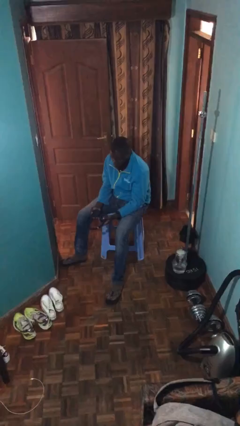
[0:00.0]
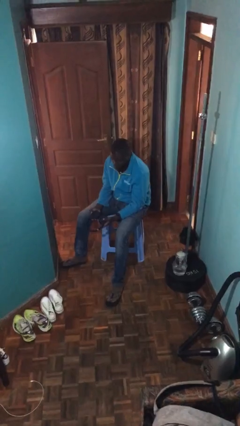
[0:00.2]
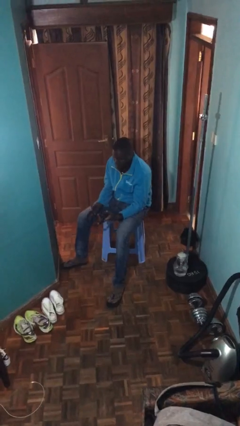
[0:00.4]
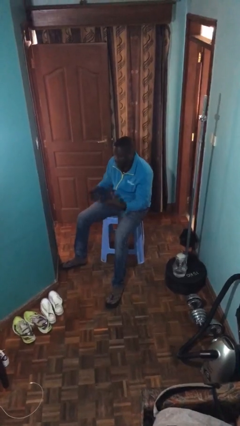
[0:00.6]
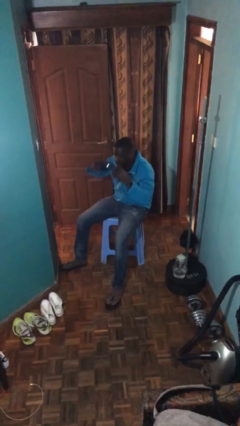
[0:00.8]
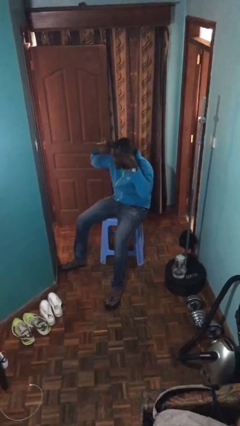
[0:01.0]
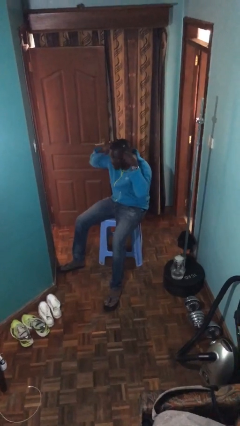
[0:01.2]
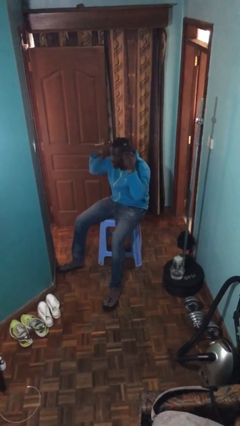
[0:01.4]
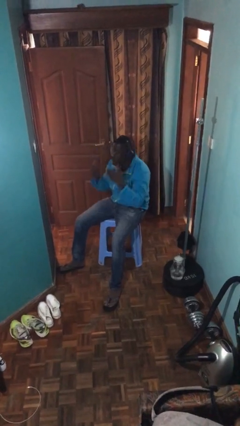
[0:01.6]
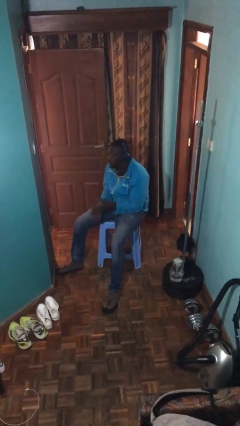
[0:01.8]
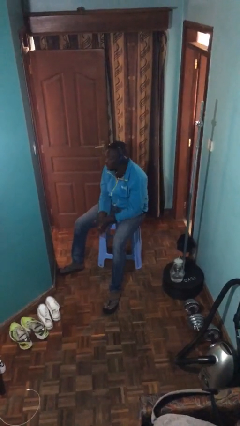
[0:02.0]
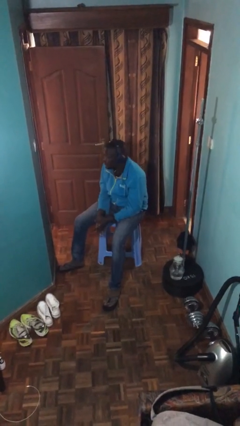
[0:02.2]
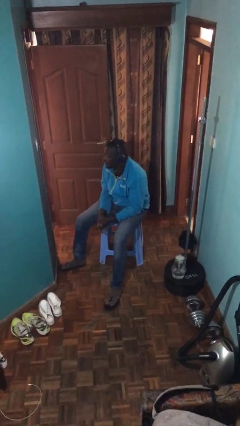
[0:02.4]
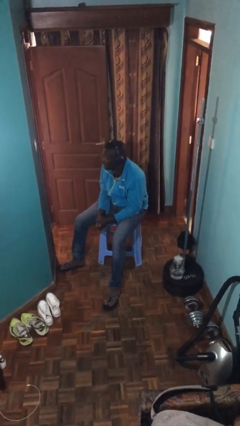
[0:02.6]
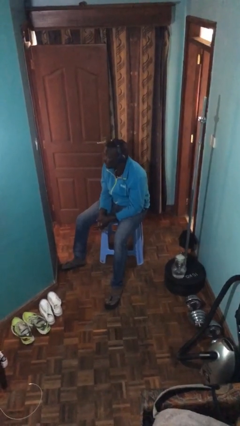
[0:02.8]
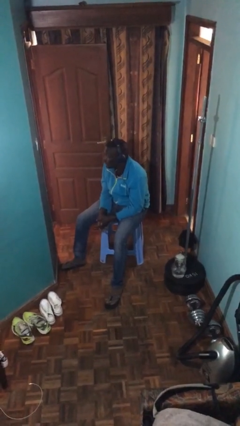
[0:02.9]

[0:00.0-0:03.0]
person puts on headphones

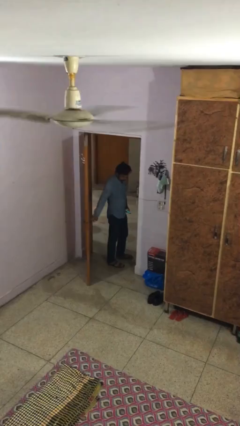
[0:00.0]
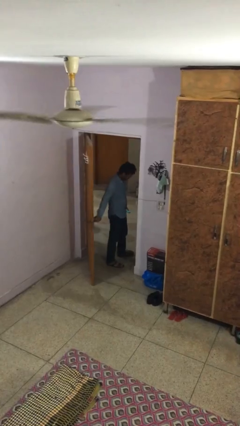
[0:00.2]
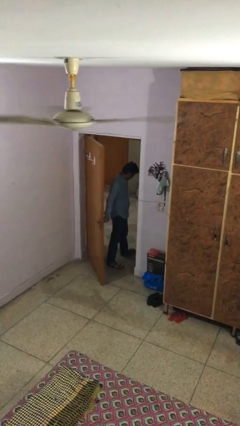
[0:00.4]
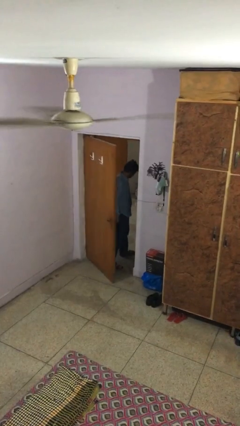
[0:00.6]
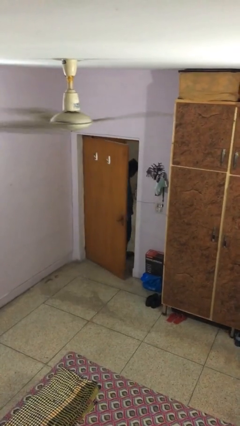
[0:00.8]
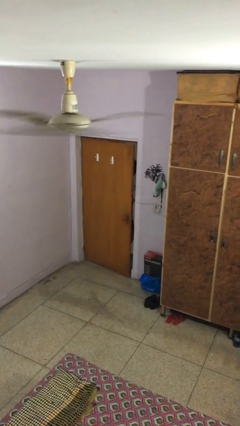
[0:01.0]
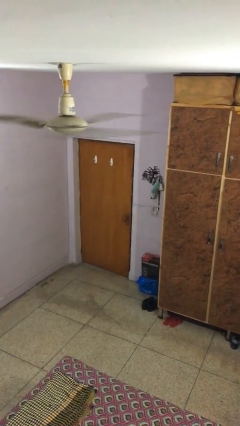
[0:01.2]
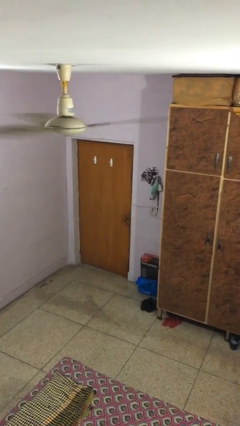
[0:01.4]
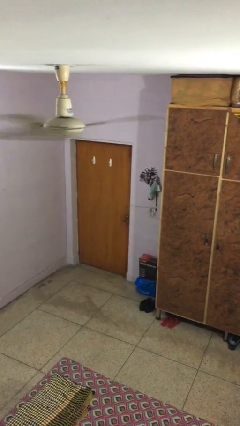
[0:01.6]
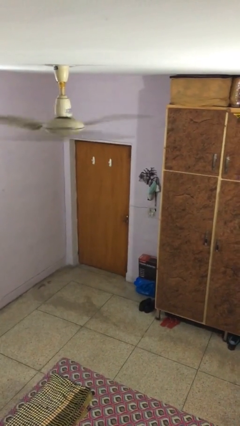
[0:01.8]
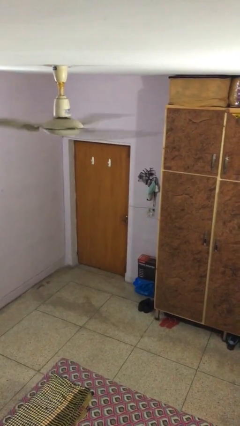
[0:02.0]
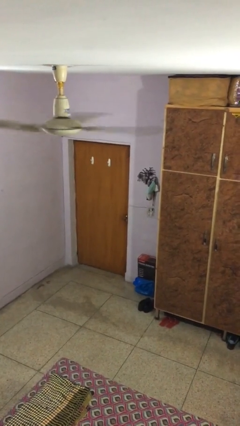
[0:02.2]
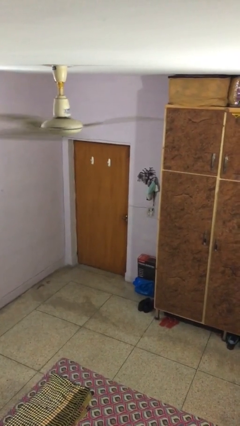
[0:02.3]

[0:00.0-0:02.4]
person closes facility door

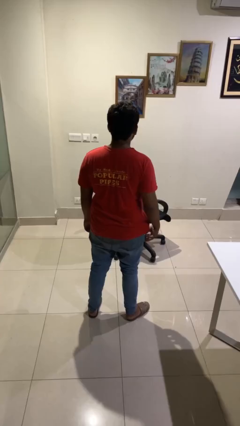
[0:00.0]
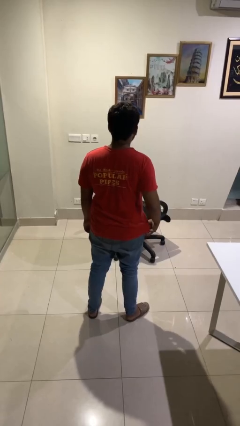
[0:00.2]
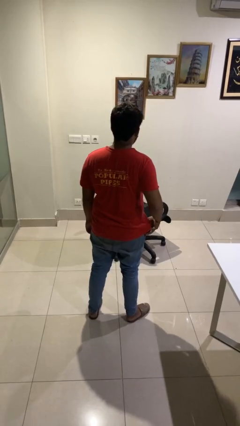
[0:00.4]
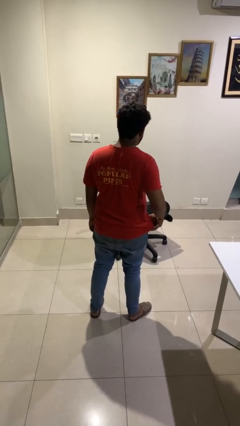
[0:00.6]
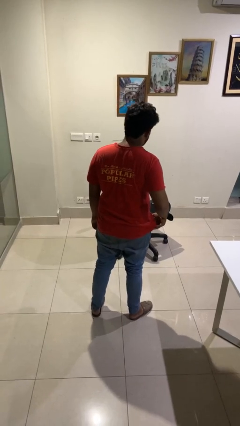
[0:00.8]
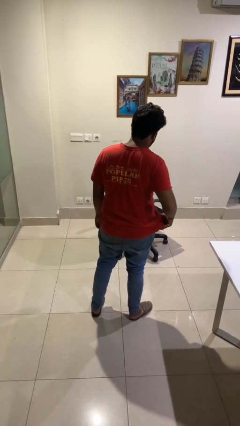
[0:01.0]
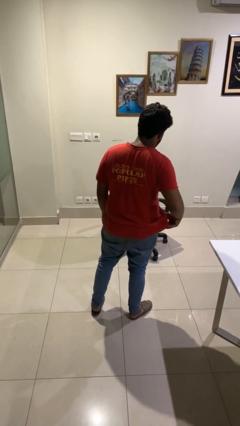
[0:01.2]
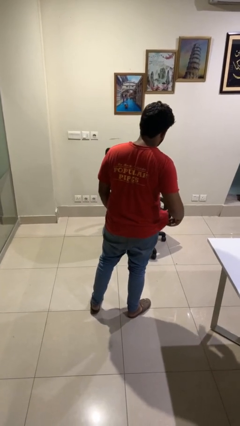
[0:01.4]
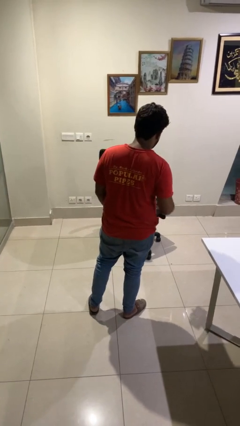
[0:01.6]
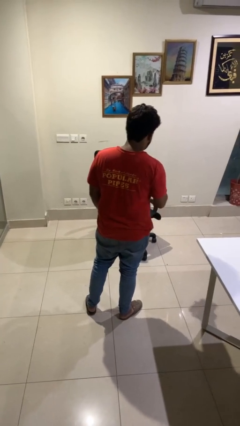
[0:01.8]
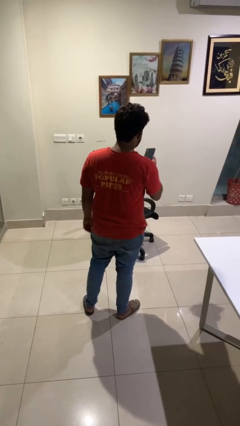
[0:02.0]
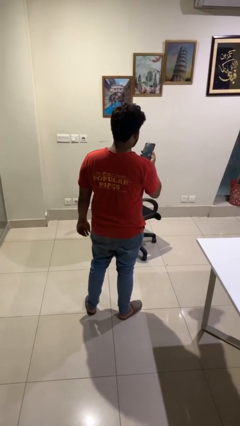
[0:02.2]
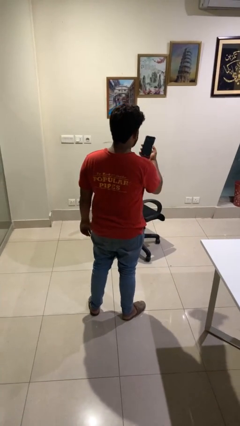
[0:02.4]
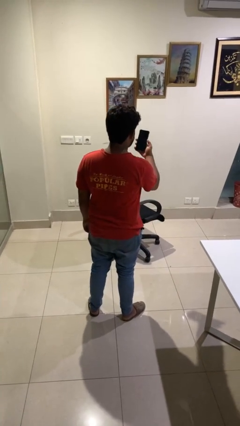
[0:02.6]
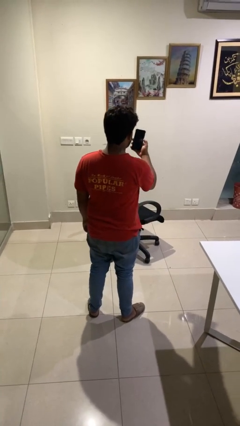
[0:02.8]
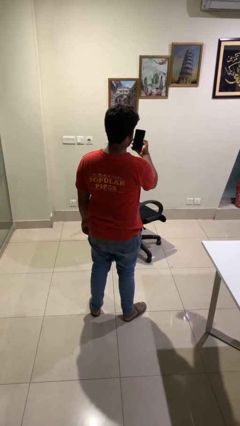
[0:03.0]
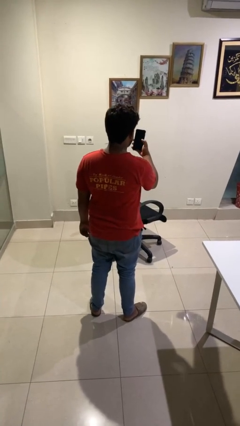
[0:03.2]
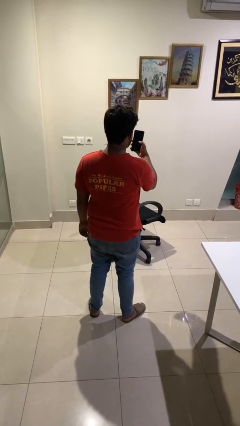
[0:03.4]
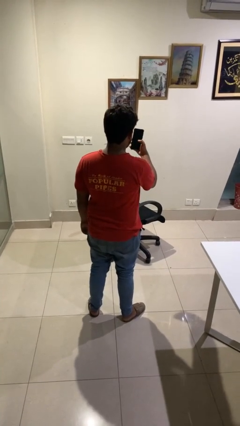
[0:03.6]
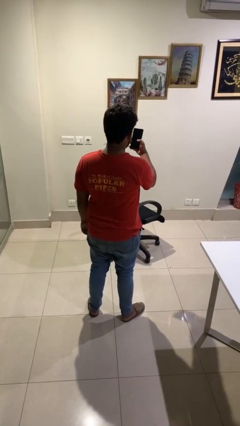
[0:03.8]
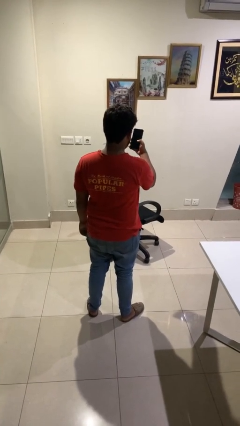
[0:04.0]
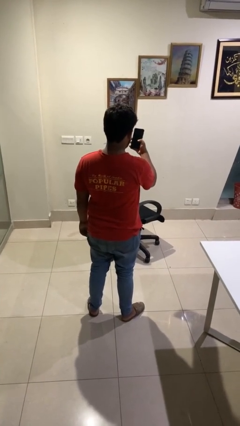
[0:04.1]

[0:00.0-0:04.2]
person takes phone from pocket

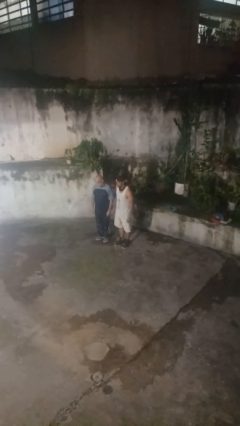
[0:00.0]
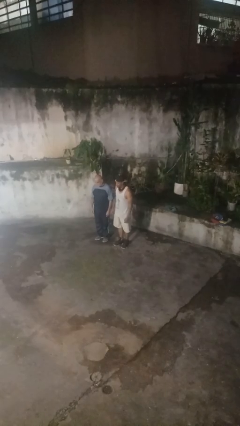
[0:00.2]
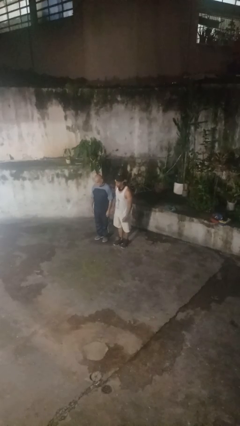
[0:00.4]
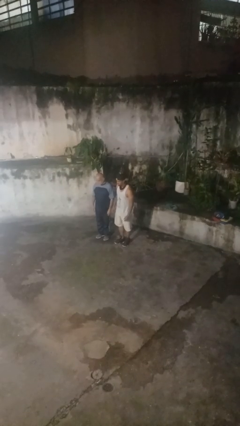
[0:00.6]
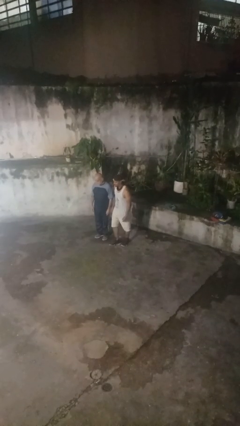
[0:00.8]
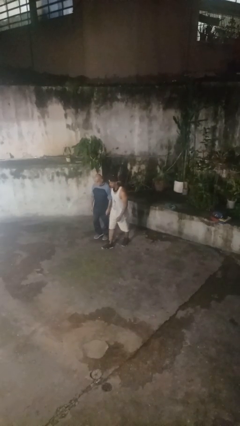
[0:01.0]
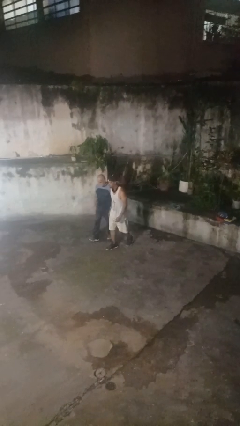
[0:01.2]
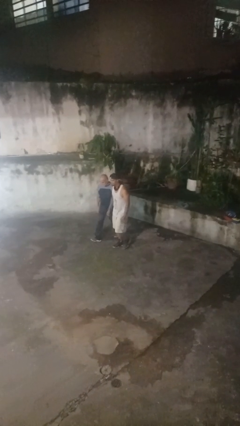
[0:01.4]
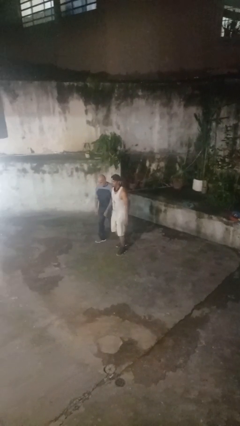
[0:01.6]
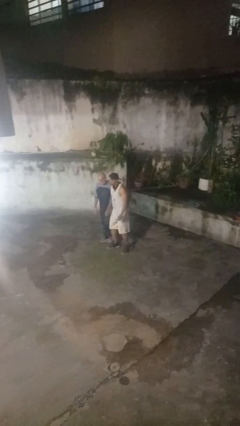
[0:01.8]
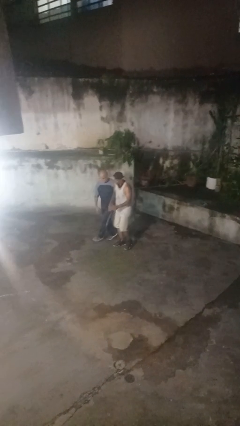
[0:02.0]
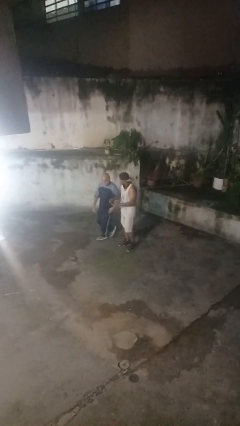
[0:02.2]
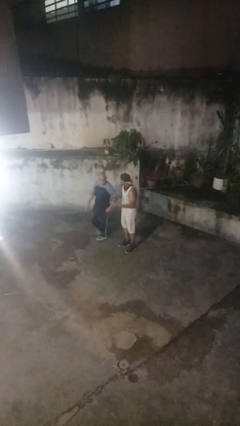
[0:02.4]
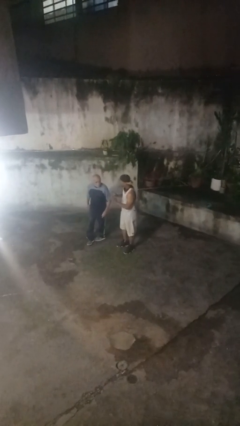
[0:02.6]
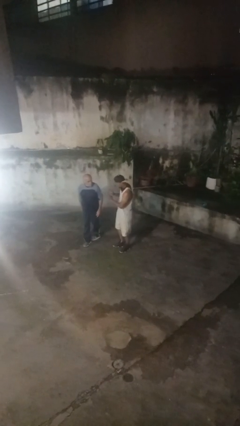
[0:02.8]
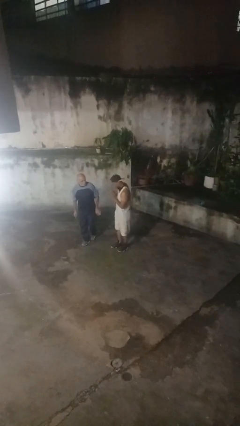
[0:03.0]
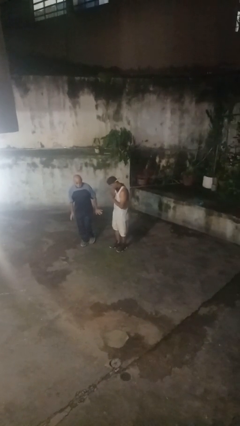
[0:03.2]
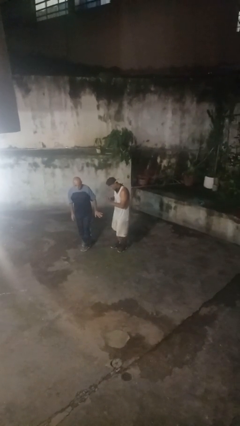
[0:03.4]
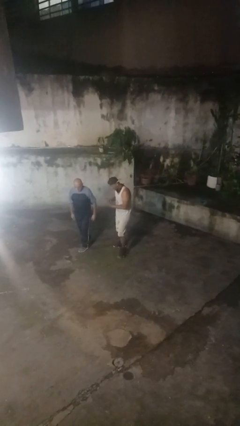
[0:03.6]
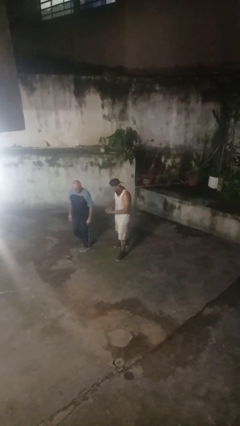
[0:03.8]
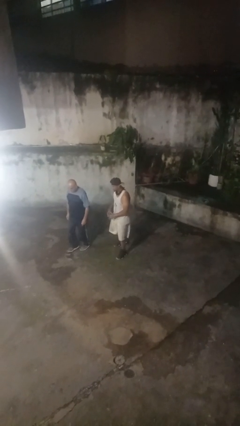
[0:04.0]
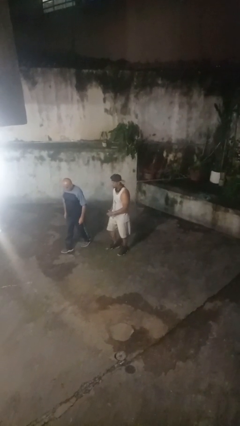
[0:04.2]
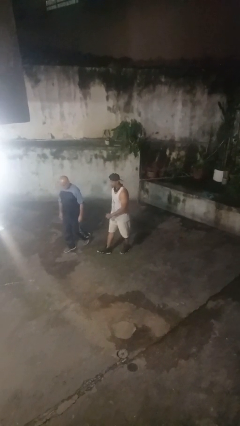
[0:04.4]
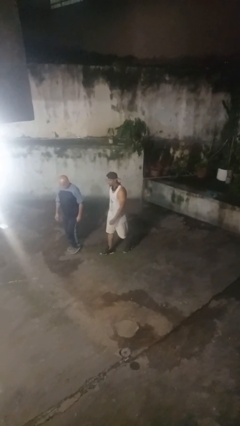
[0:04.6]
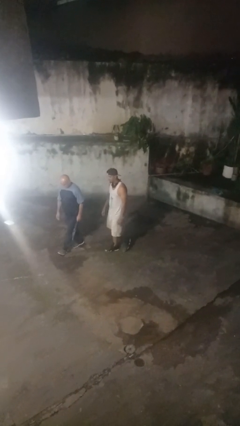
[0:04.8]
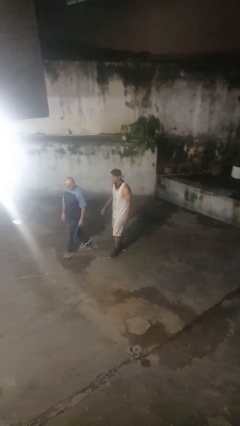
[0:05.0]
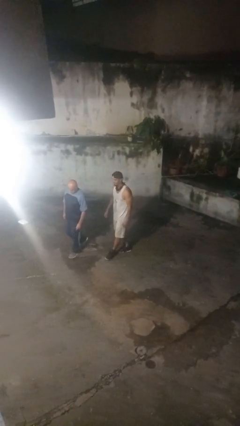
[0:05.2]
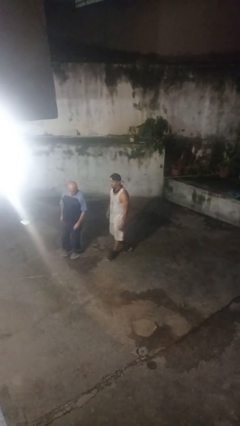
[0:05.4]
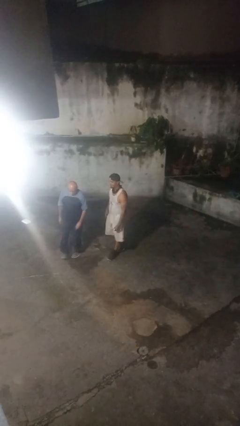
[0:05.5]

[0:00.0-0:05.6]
person bumps into person

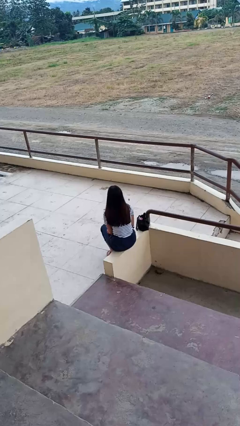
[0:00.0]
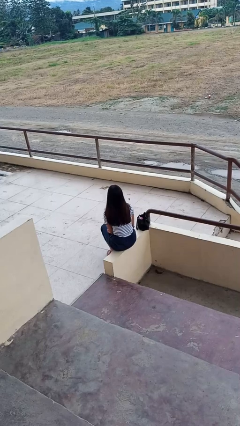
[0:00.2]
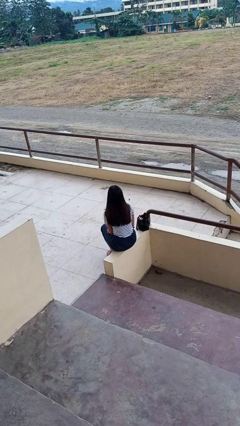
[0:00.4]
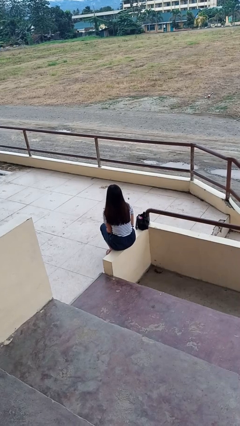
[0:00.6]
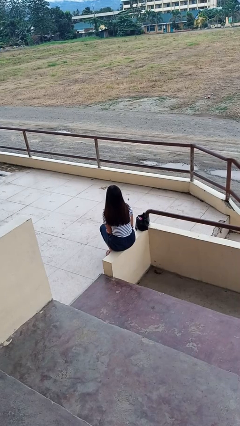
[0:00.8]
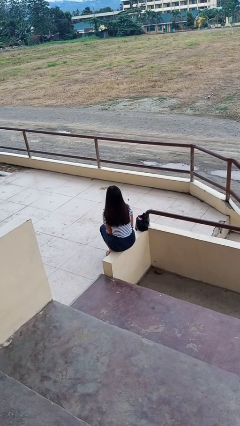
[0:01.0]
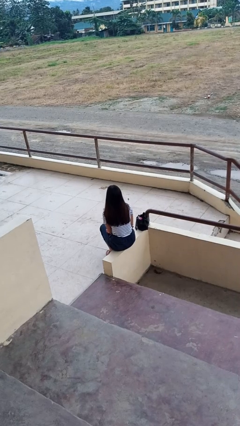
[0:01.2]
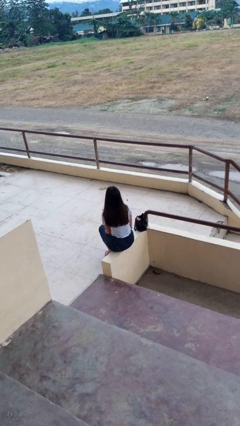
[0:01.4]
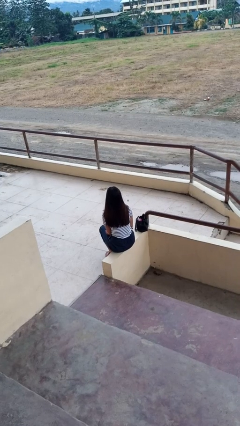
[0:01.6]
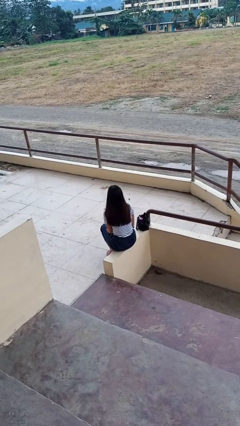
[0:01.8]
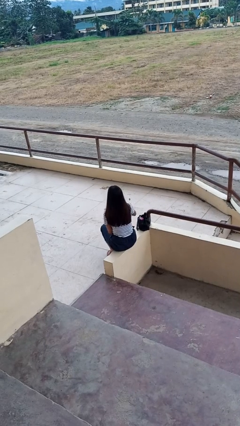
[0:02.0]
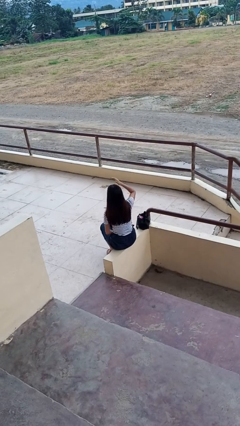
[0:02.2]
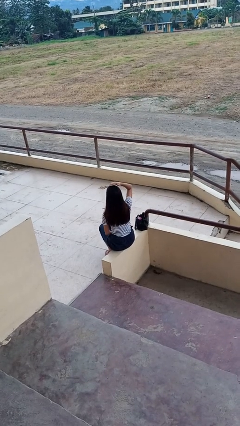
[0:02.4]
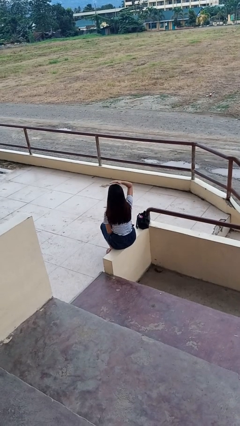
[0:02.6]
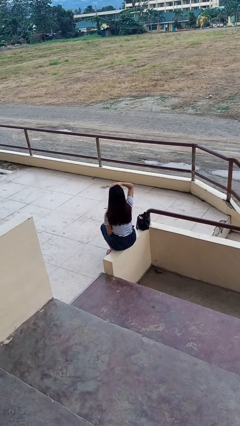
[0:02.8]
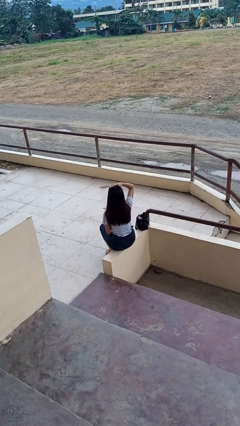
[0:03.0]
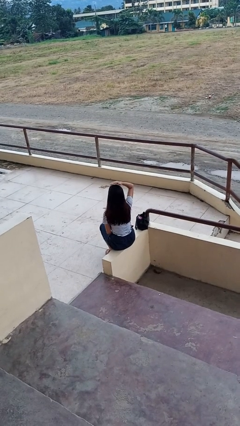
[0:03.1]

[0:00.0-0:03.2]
person pats head
